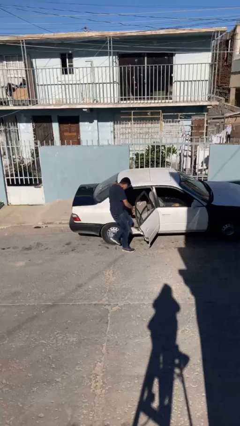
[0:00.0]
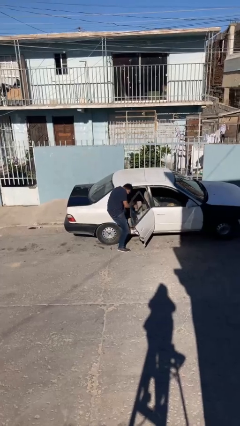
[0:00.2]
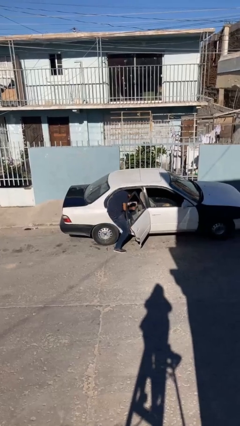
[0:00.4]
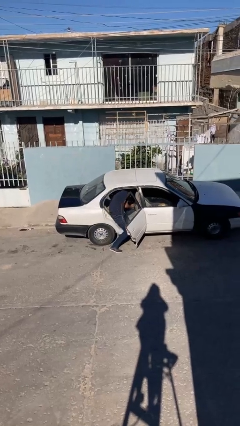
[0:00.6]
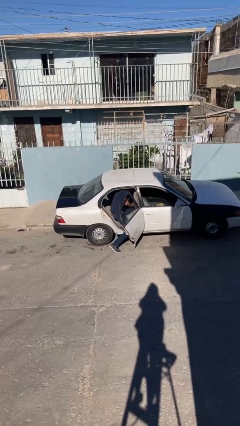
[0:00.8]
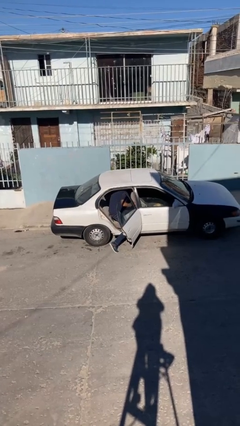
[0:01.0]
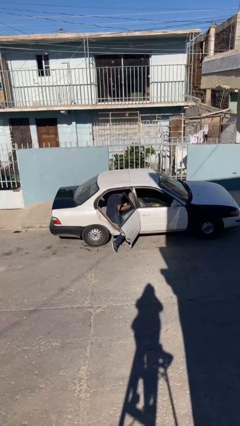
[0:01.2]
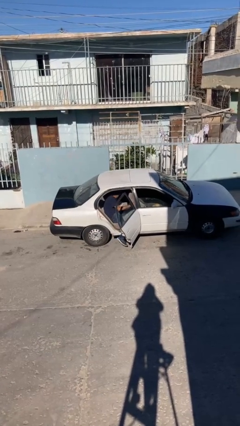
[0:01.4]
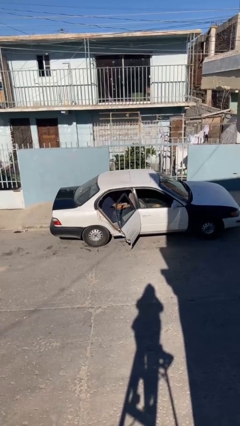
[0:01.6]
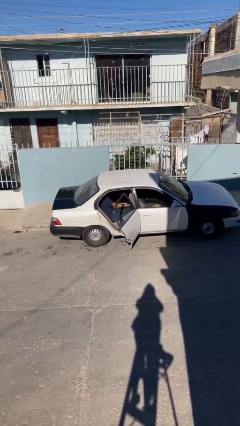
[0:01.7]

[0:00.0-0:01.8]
person enters car

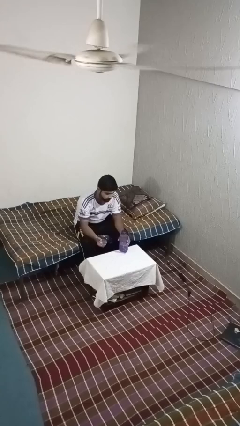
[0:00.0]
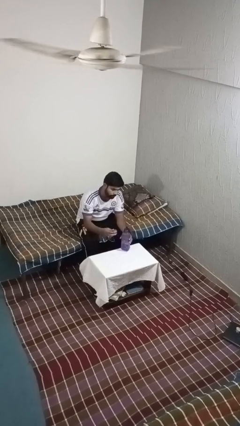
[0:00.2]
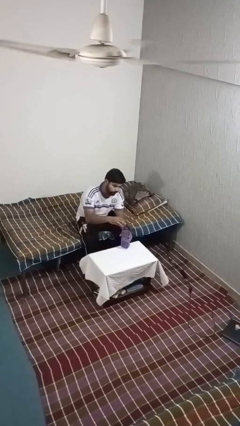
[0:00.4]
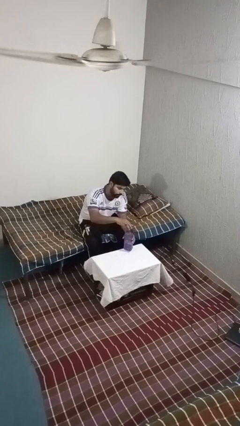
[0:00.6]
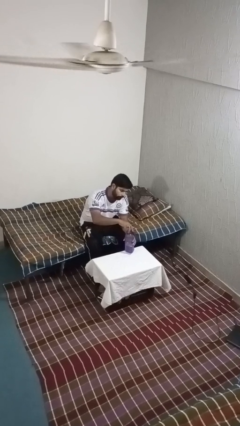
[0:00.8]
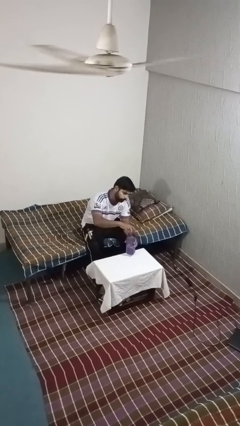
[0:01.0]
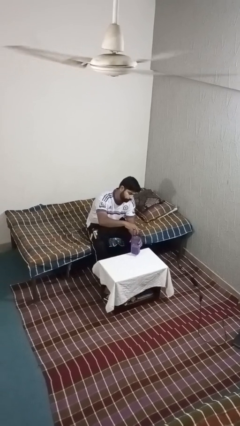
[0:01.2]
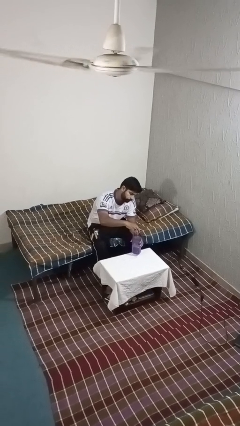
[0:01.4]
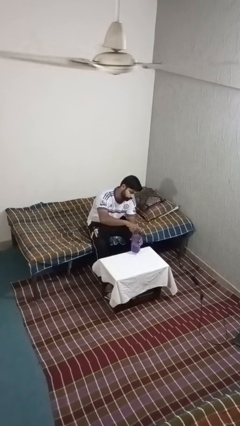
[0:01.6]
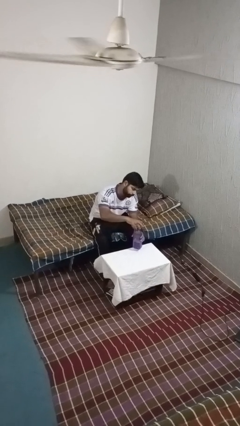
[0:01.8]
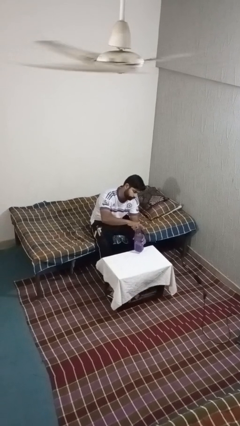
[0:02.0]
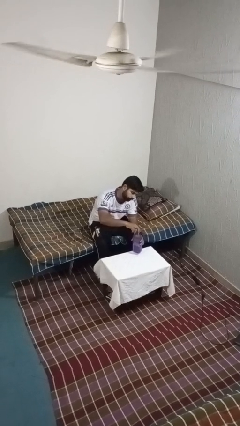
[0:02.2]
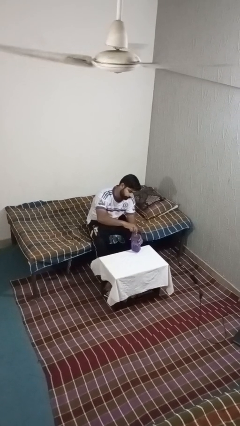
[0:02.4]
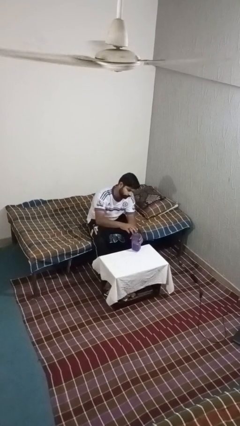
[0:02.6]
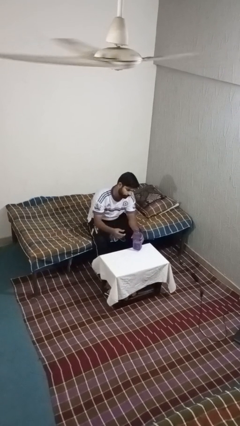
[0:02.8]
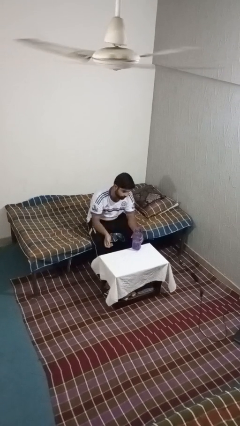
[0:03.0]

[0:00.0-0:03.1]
person screws lid to bottle

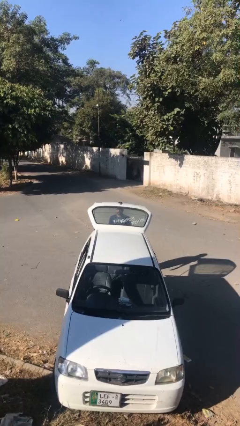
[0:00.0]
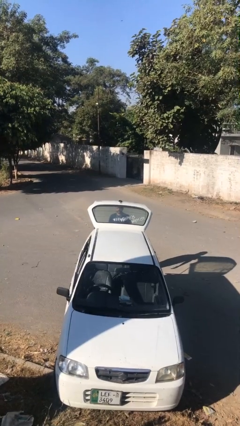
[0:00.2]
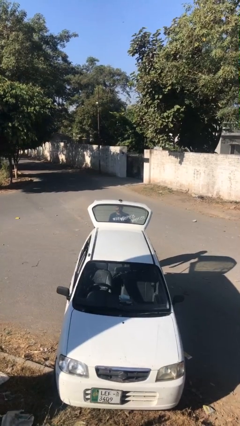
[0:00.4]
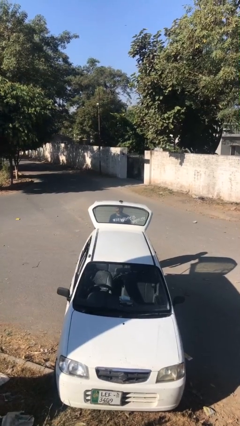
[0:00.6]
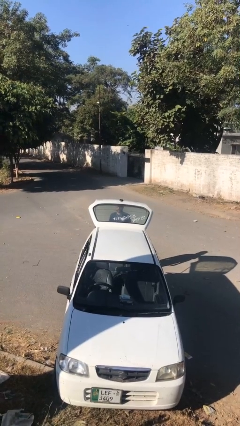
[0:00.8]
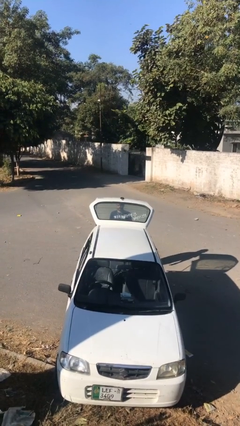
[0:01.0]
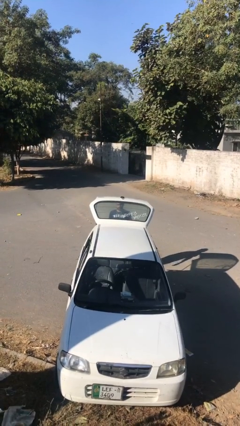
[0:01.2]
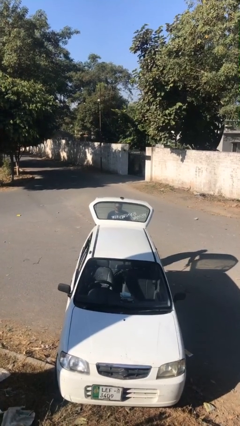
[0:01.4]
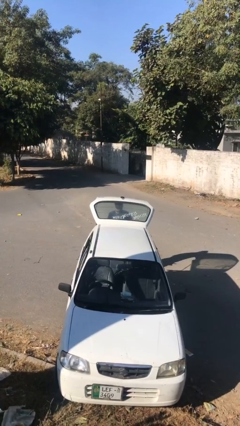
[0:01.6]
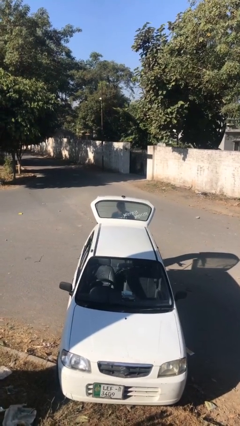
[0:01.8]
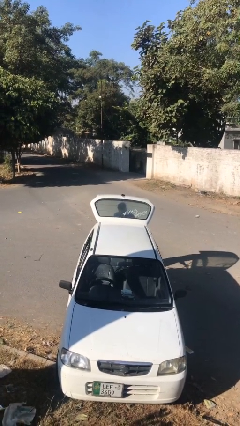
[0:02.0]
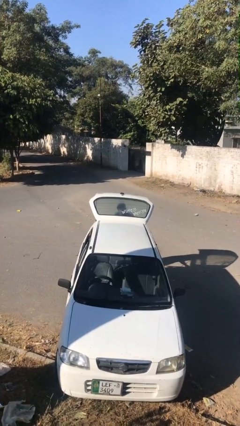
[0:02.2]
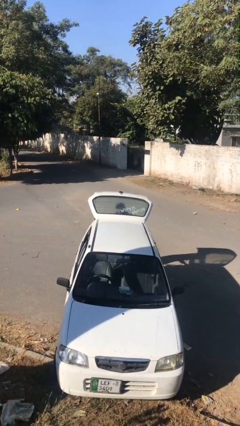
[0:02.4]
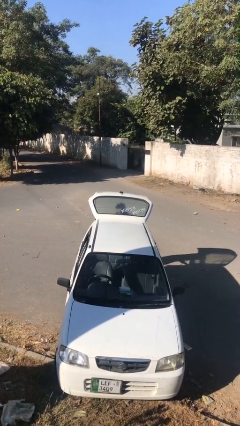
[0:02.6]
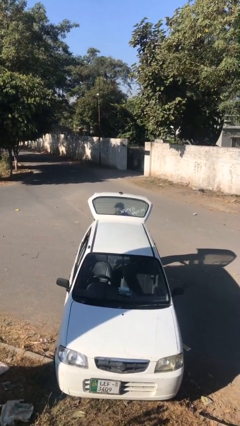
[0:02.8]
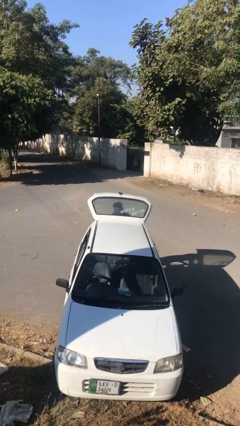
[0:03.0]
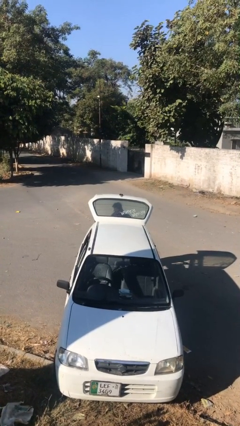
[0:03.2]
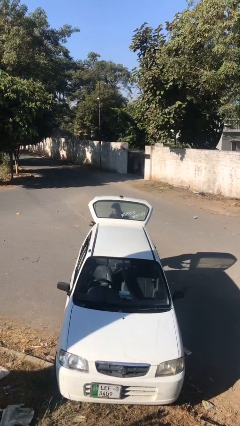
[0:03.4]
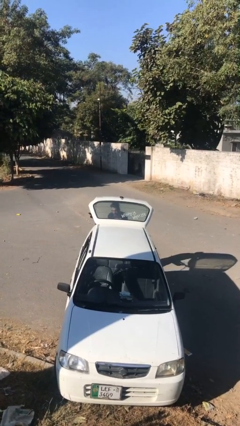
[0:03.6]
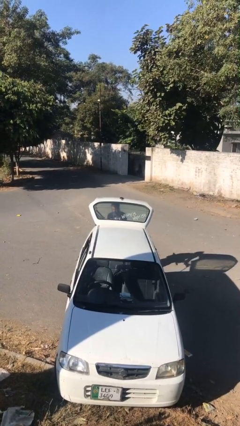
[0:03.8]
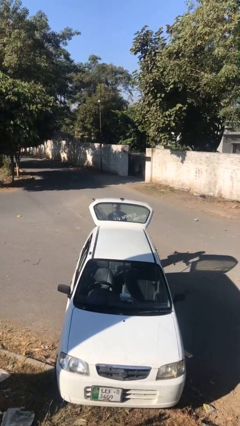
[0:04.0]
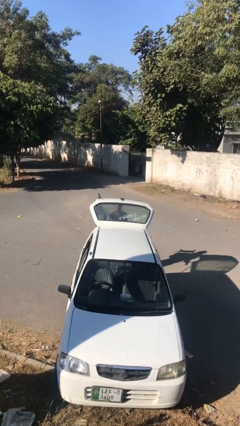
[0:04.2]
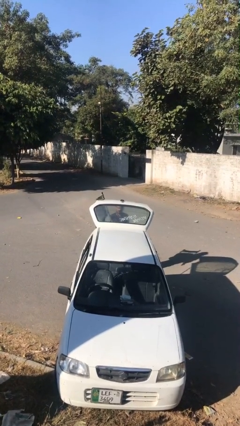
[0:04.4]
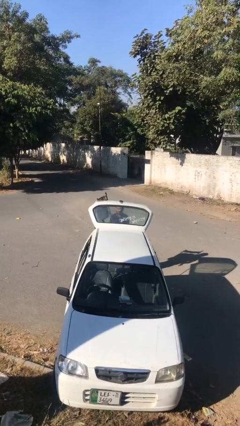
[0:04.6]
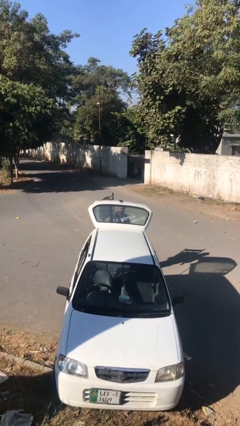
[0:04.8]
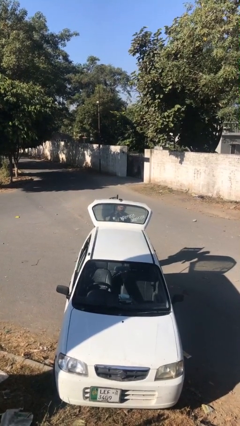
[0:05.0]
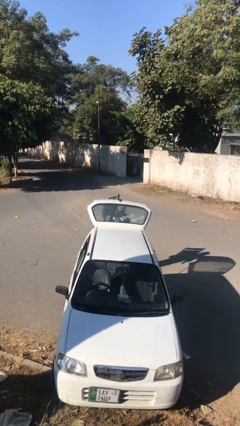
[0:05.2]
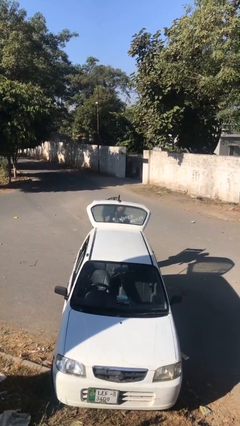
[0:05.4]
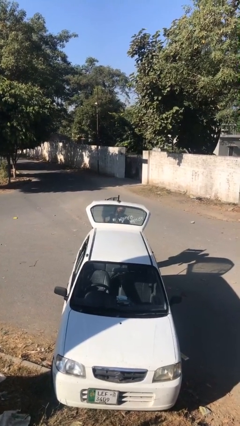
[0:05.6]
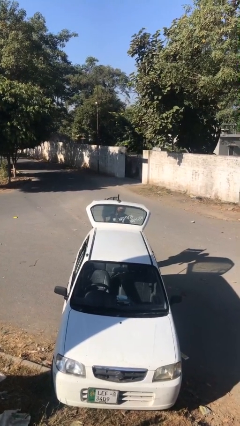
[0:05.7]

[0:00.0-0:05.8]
person unloads car

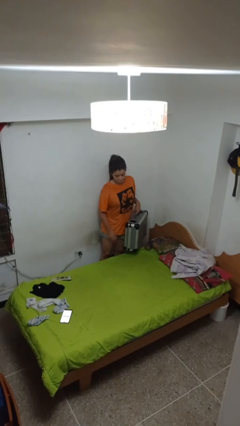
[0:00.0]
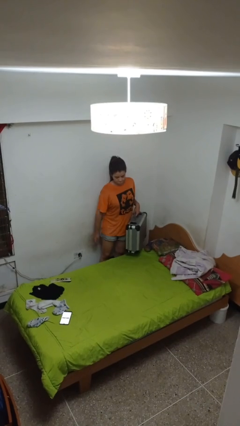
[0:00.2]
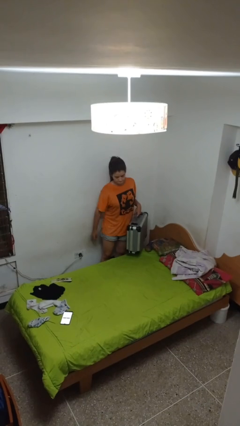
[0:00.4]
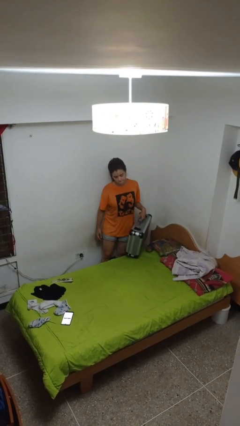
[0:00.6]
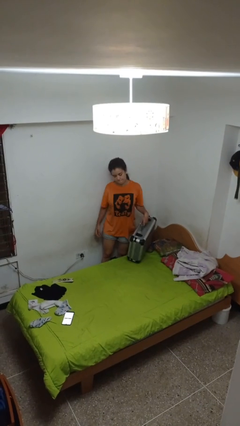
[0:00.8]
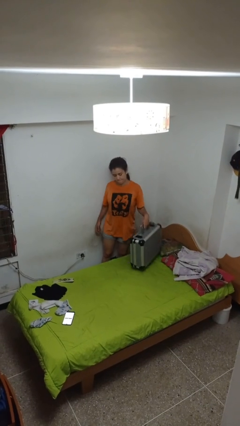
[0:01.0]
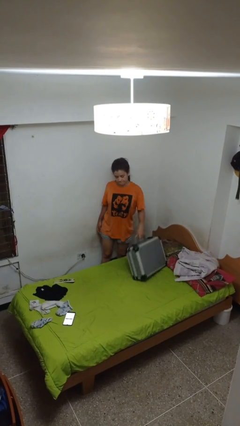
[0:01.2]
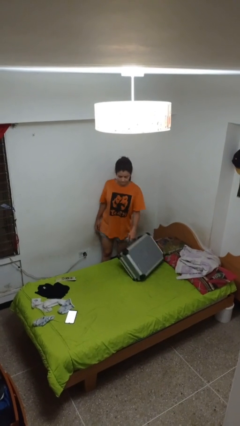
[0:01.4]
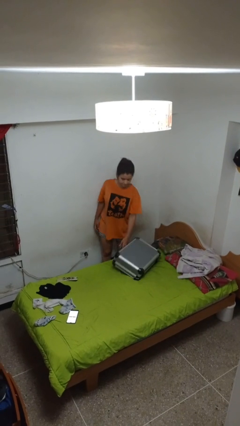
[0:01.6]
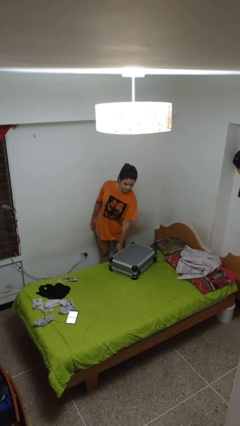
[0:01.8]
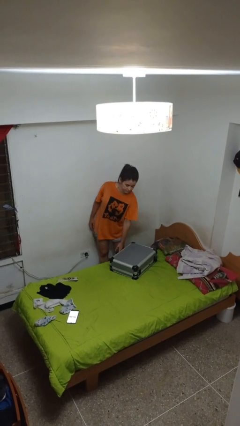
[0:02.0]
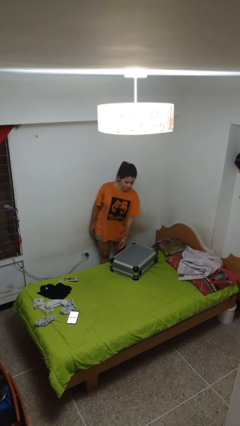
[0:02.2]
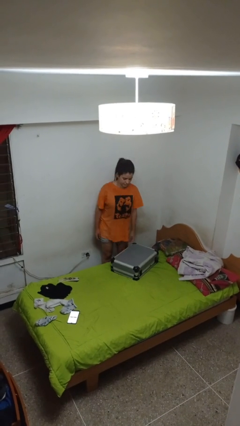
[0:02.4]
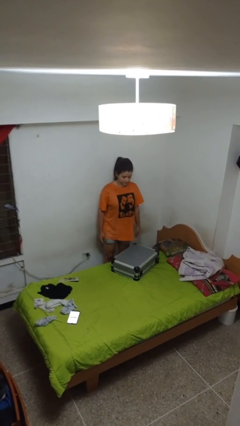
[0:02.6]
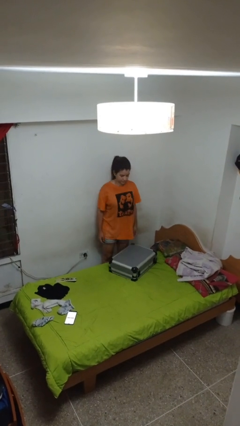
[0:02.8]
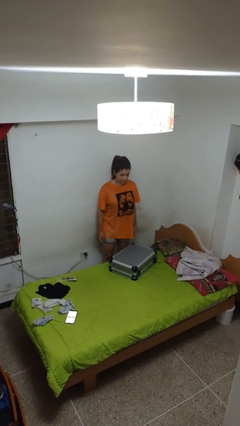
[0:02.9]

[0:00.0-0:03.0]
person puts down object on bed

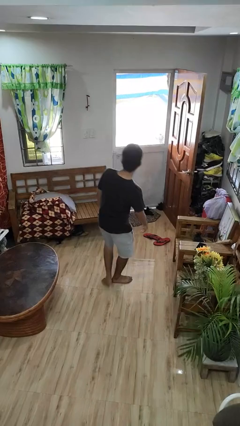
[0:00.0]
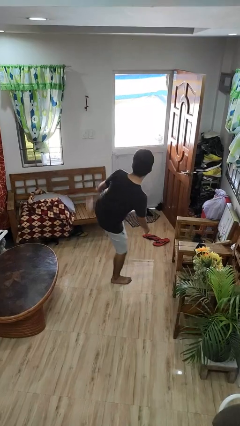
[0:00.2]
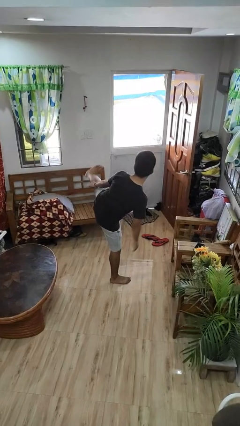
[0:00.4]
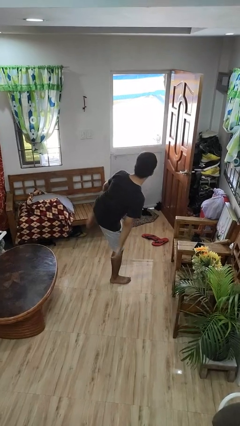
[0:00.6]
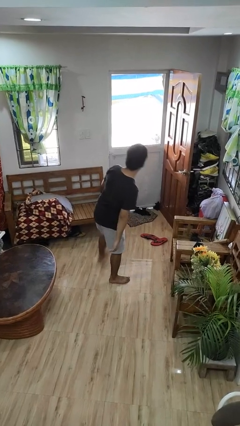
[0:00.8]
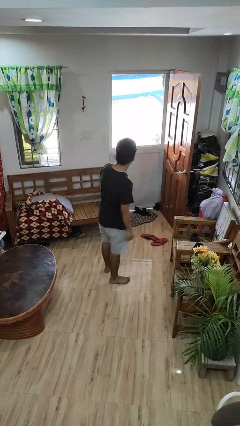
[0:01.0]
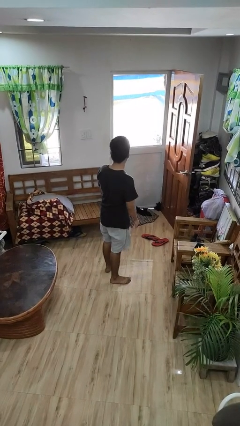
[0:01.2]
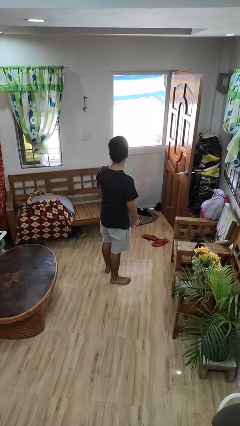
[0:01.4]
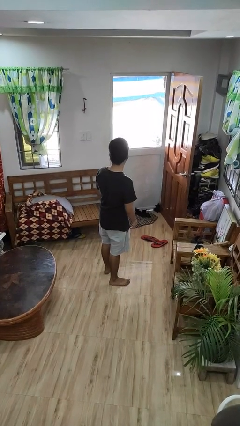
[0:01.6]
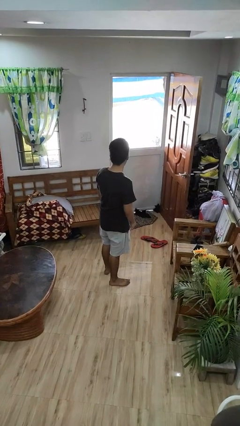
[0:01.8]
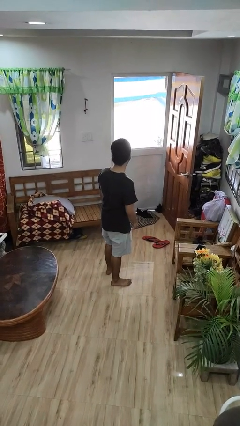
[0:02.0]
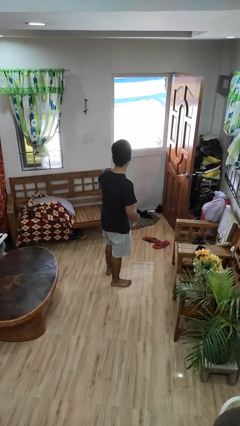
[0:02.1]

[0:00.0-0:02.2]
person karate kicks

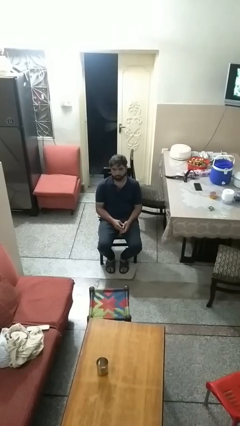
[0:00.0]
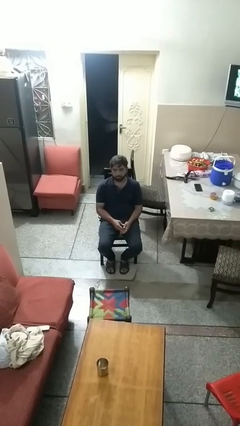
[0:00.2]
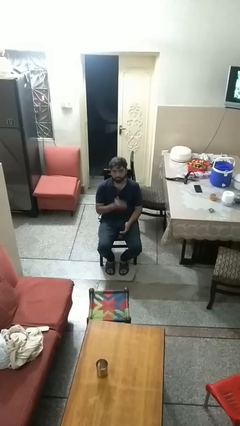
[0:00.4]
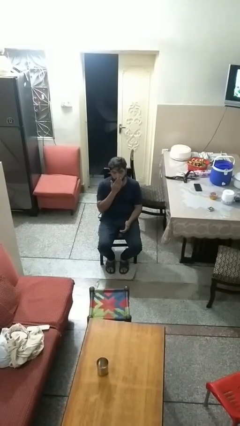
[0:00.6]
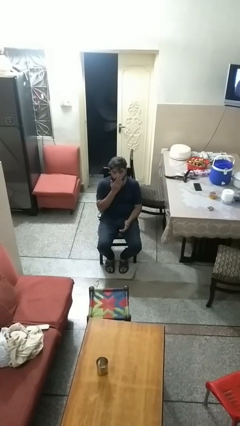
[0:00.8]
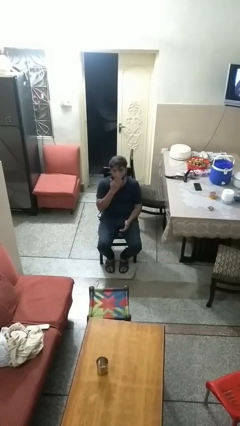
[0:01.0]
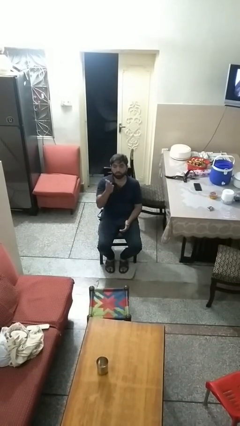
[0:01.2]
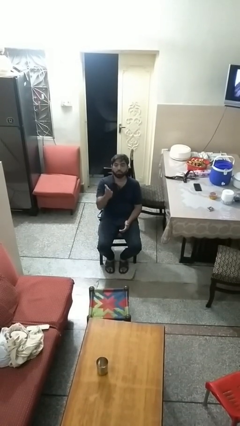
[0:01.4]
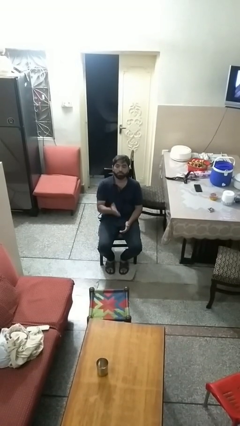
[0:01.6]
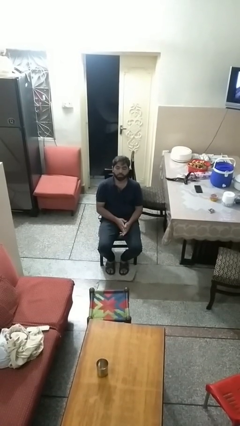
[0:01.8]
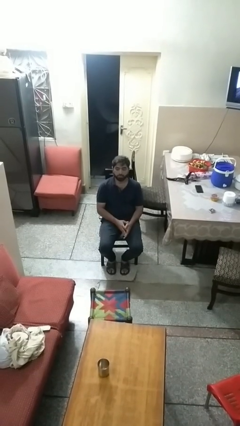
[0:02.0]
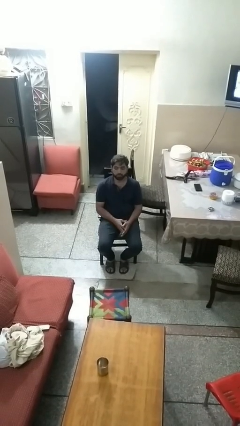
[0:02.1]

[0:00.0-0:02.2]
person gestures blow kiss
